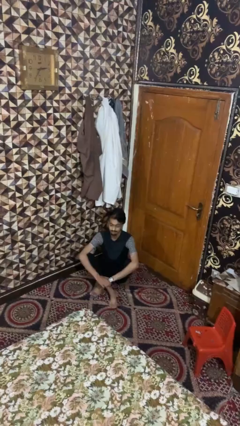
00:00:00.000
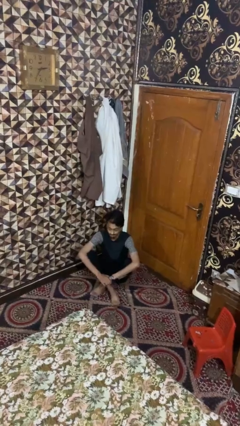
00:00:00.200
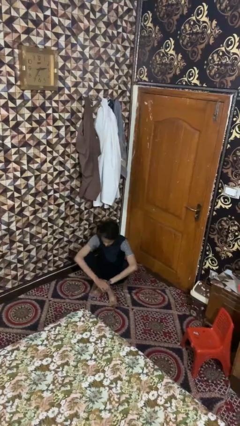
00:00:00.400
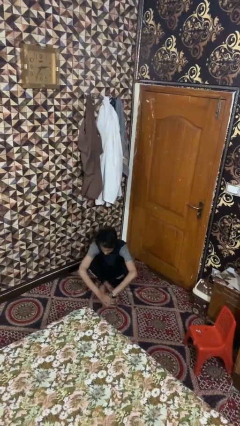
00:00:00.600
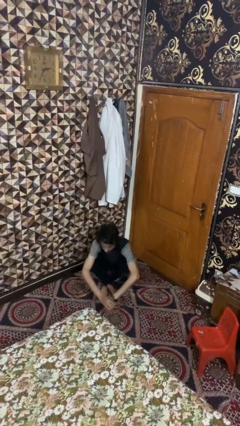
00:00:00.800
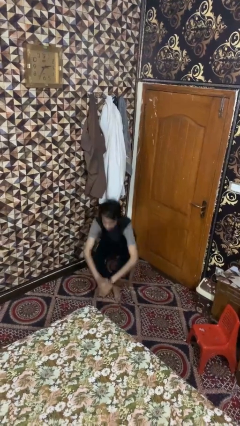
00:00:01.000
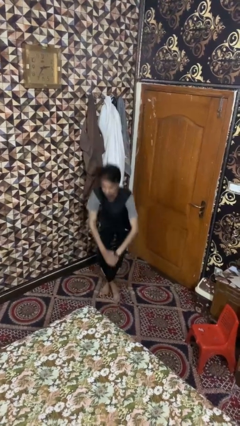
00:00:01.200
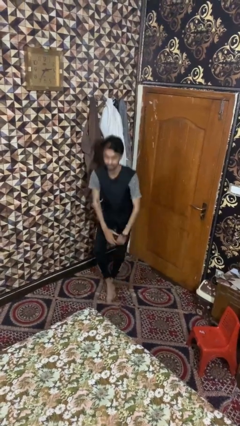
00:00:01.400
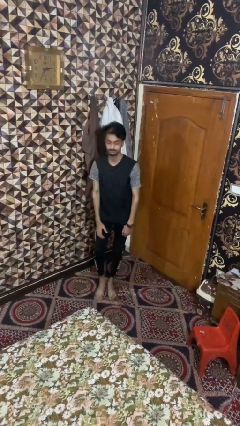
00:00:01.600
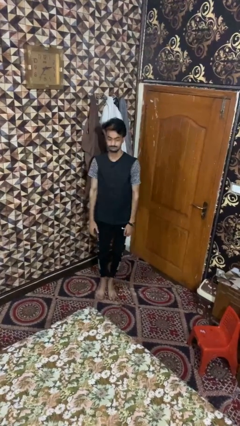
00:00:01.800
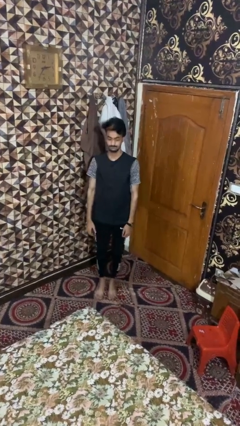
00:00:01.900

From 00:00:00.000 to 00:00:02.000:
person stands up from floor

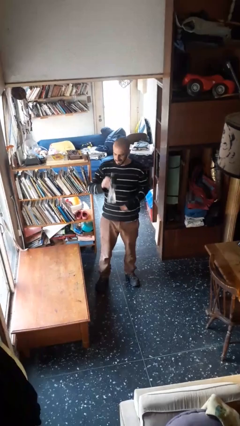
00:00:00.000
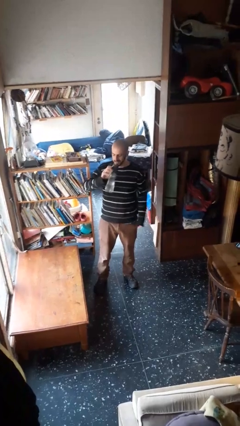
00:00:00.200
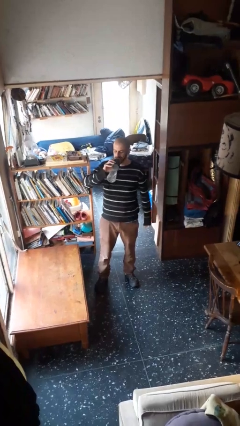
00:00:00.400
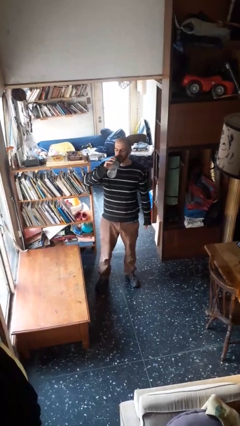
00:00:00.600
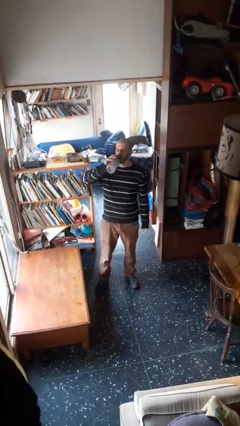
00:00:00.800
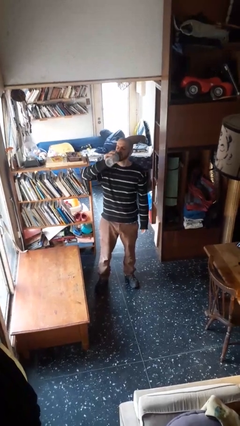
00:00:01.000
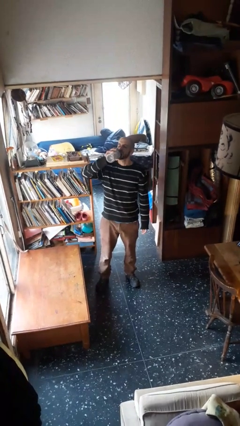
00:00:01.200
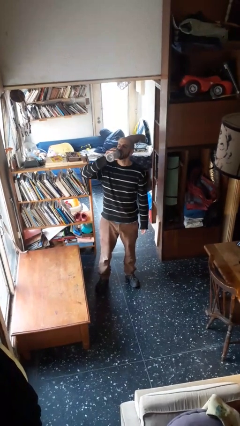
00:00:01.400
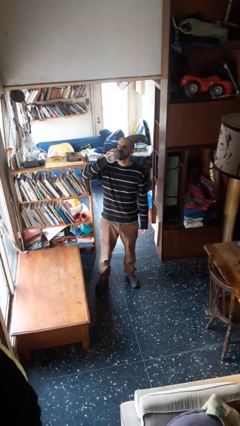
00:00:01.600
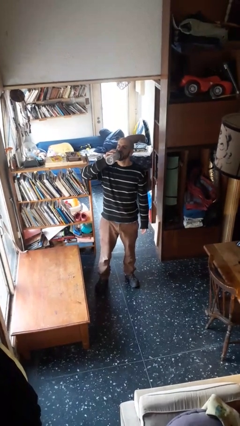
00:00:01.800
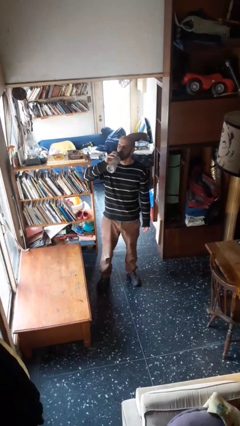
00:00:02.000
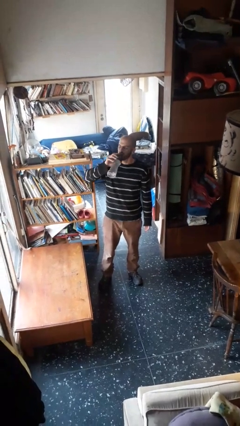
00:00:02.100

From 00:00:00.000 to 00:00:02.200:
person drinks from bottle

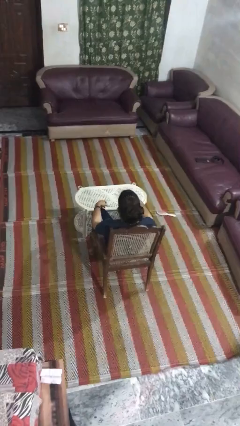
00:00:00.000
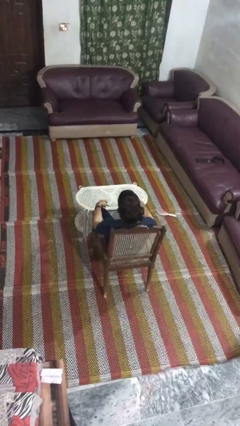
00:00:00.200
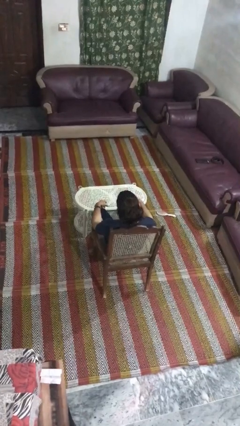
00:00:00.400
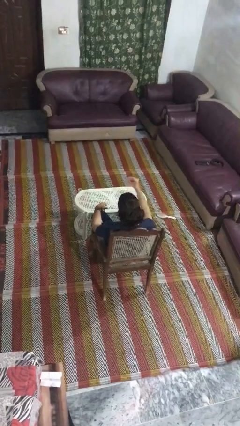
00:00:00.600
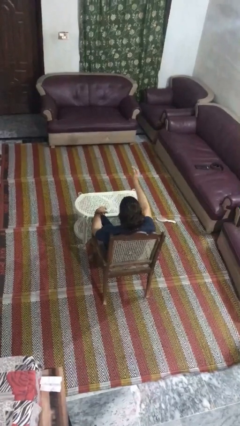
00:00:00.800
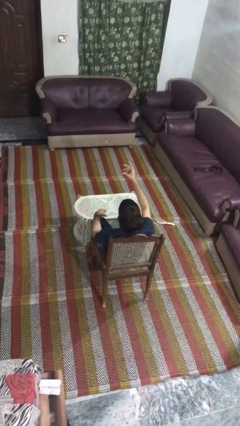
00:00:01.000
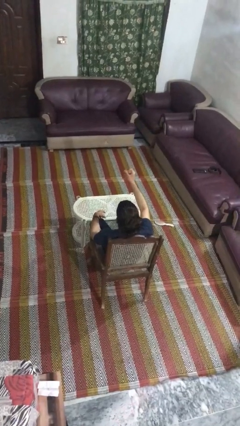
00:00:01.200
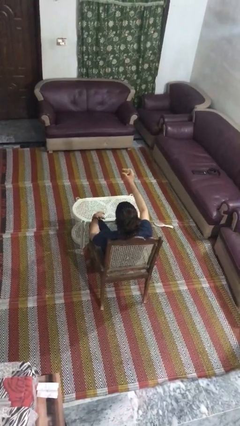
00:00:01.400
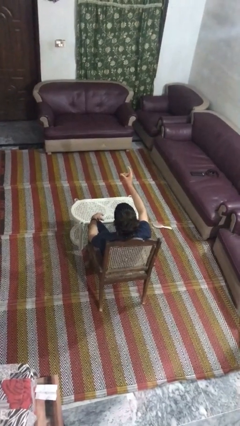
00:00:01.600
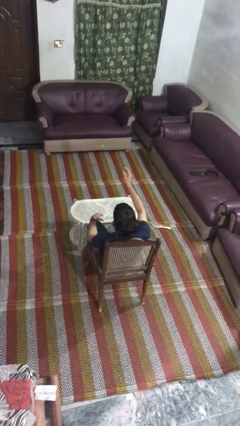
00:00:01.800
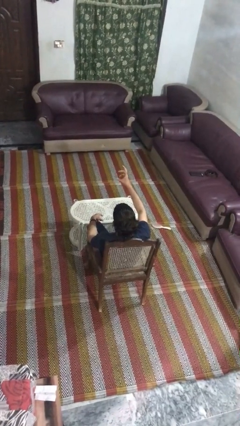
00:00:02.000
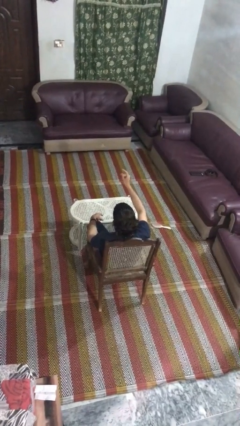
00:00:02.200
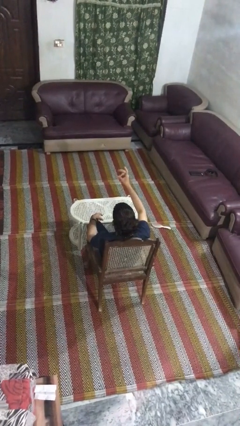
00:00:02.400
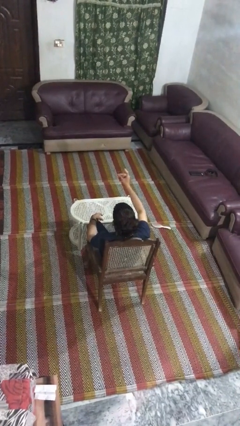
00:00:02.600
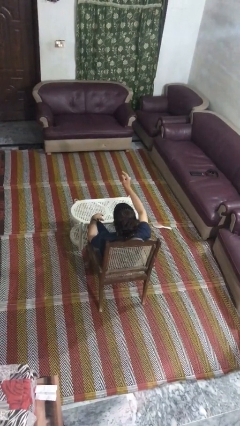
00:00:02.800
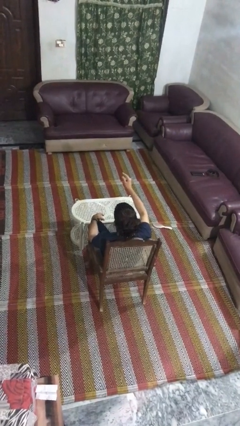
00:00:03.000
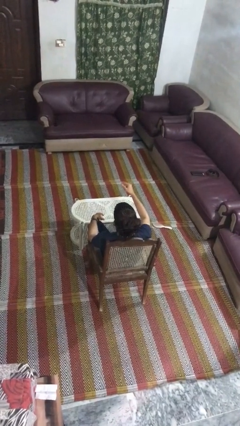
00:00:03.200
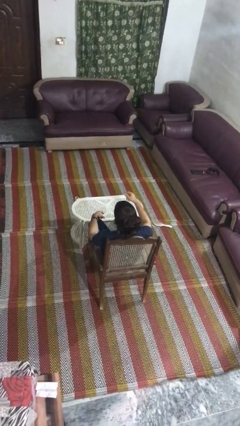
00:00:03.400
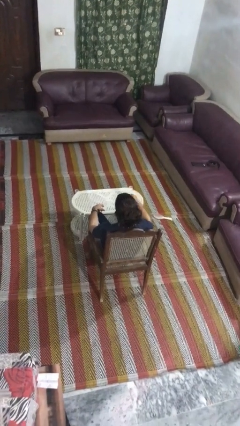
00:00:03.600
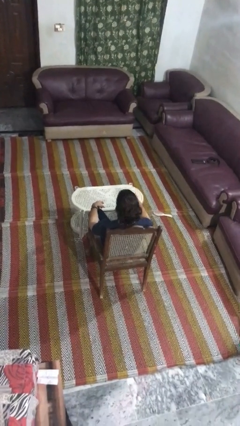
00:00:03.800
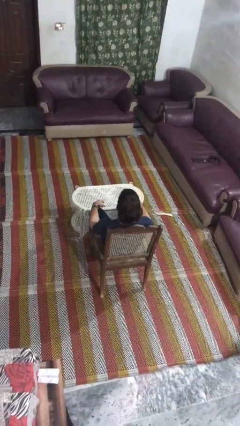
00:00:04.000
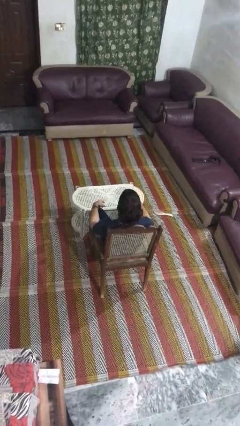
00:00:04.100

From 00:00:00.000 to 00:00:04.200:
person snaps fingers

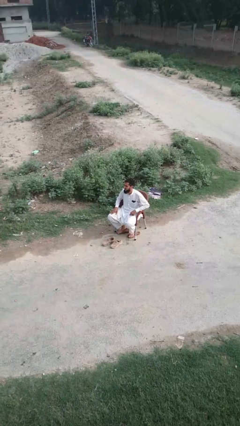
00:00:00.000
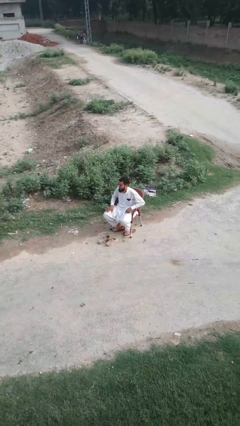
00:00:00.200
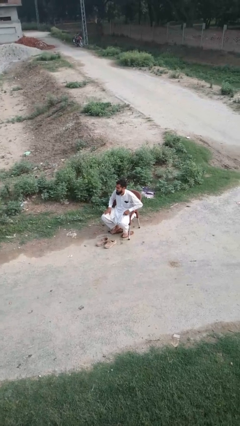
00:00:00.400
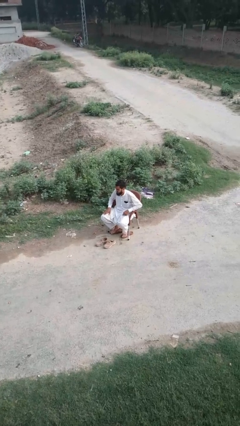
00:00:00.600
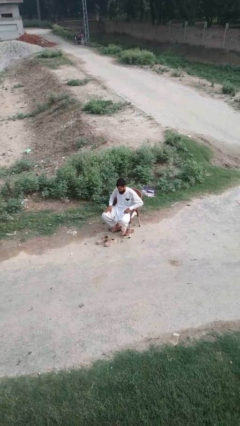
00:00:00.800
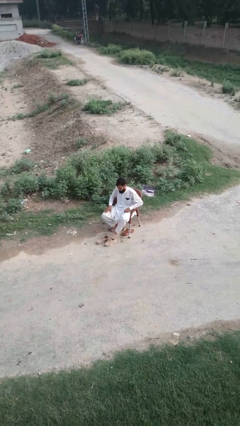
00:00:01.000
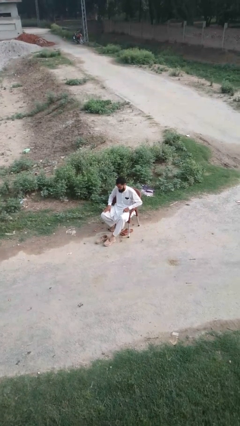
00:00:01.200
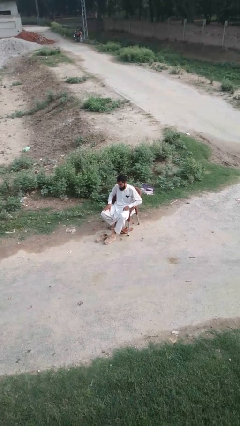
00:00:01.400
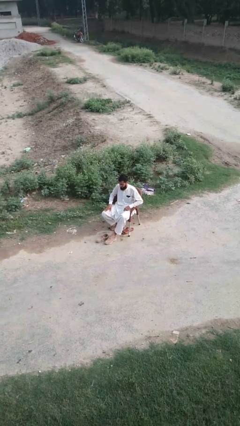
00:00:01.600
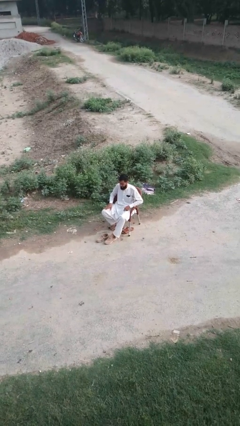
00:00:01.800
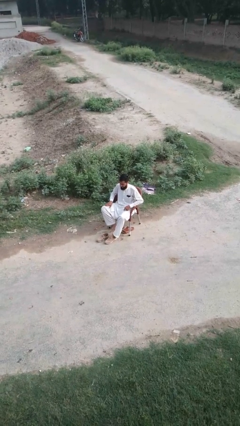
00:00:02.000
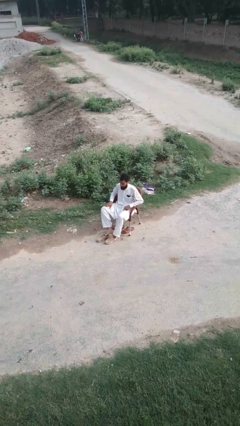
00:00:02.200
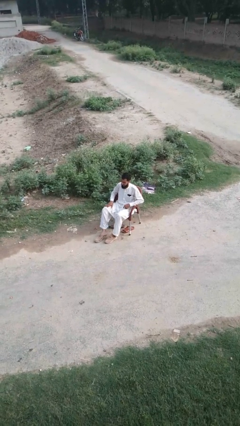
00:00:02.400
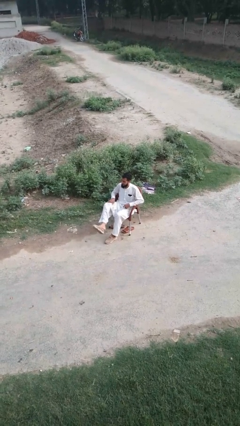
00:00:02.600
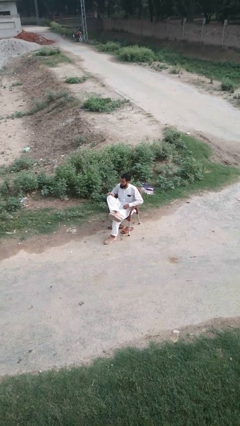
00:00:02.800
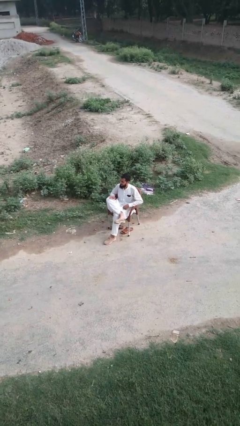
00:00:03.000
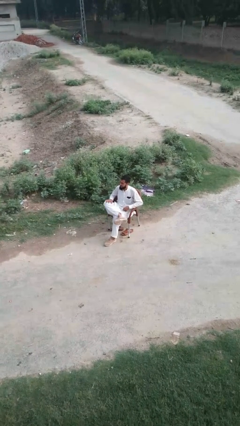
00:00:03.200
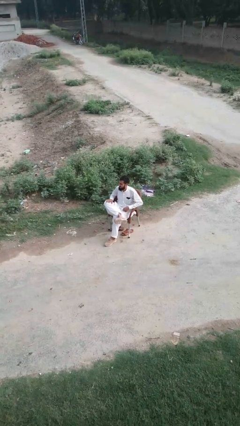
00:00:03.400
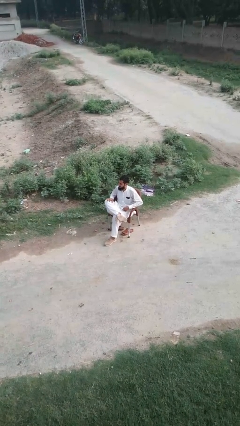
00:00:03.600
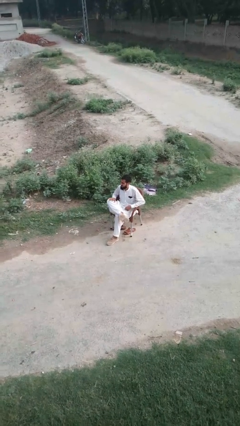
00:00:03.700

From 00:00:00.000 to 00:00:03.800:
person puts on shoes

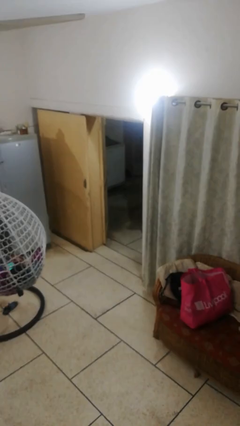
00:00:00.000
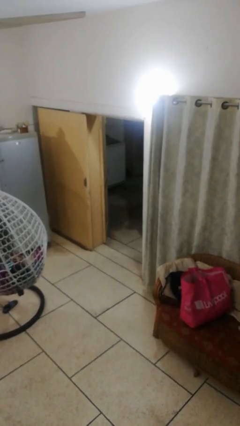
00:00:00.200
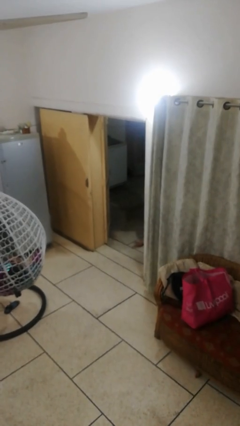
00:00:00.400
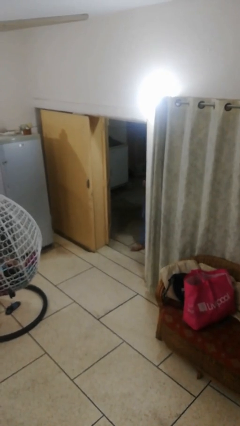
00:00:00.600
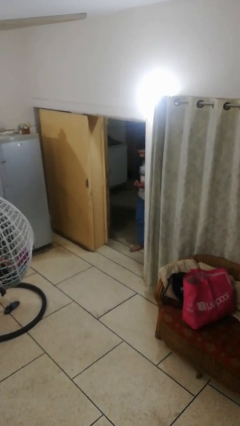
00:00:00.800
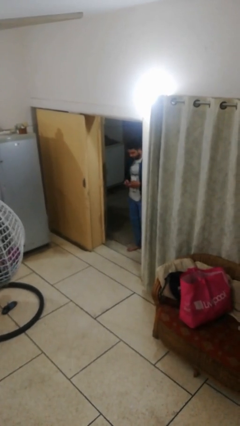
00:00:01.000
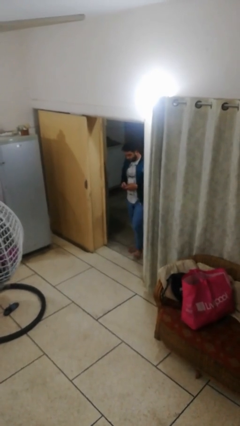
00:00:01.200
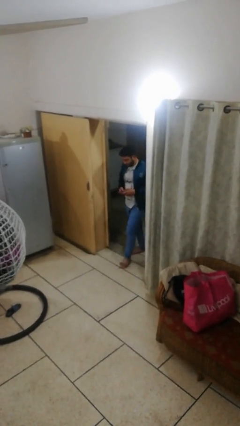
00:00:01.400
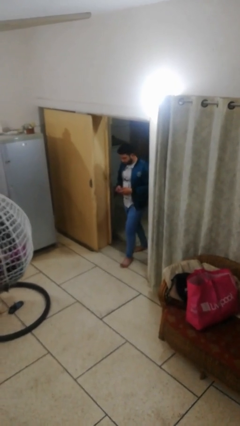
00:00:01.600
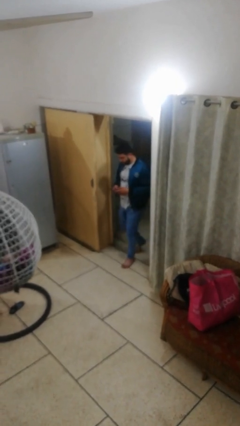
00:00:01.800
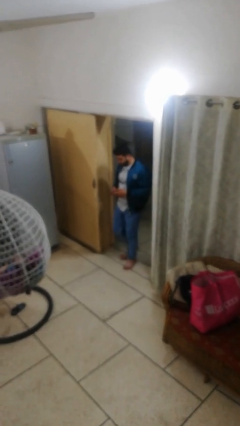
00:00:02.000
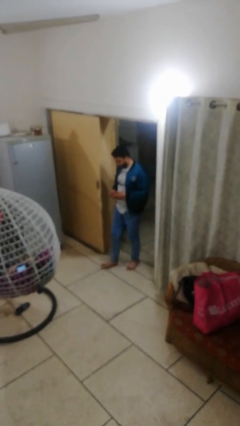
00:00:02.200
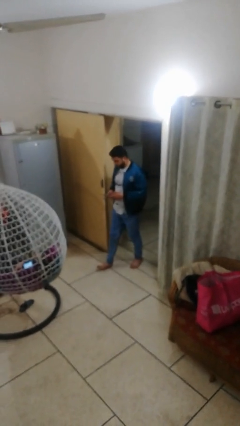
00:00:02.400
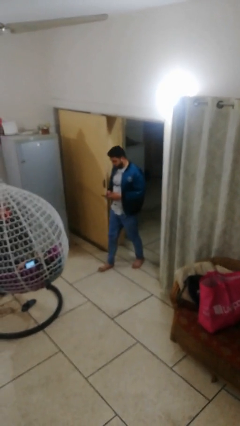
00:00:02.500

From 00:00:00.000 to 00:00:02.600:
person enters scene through structure

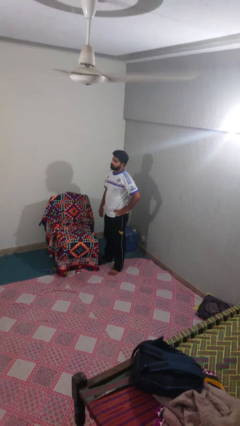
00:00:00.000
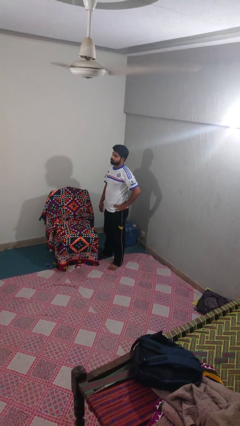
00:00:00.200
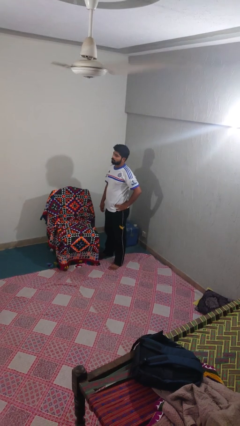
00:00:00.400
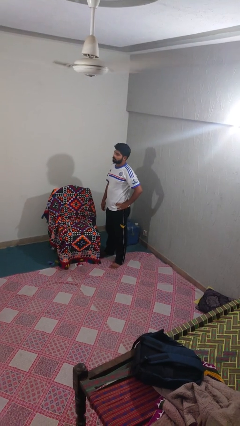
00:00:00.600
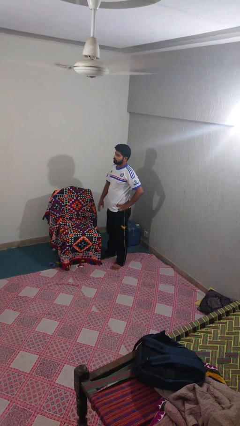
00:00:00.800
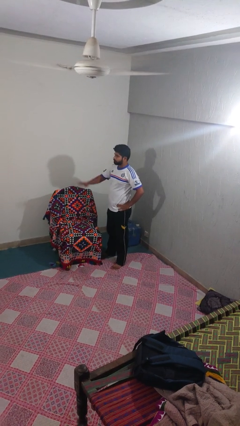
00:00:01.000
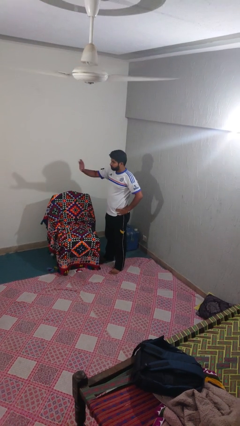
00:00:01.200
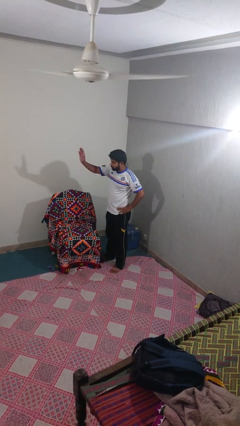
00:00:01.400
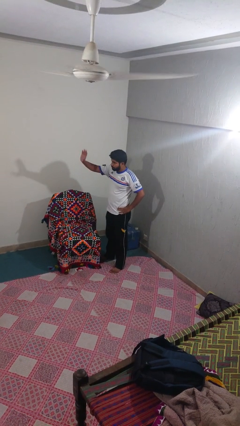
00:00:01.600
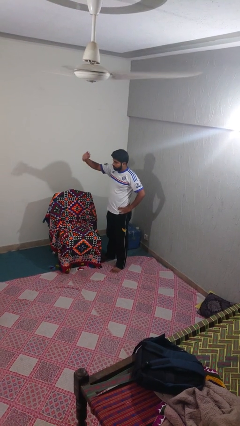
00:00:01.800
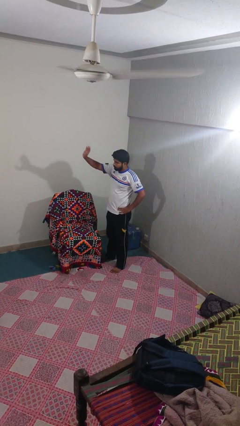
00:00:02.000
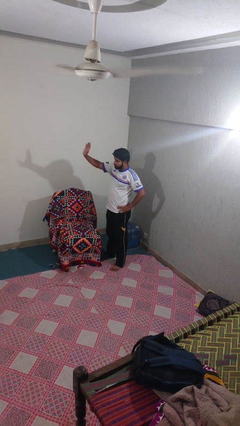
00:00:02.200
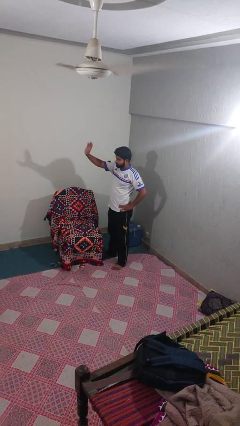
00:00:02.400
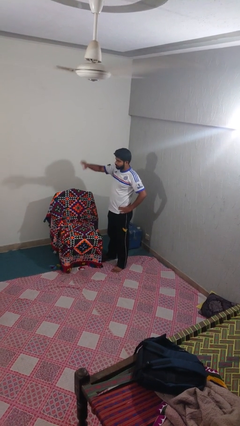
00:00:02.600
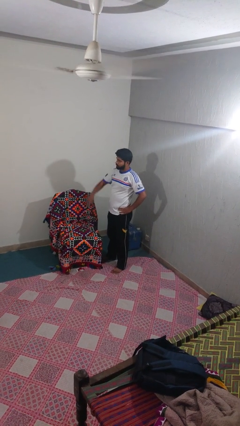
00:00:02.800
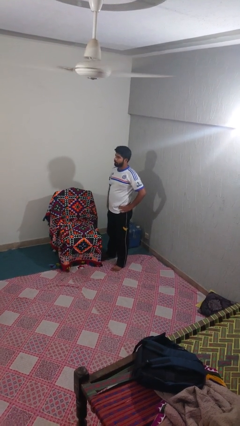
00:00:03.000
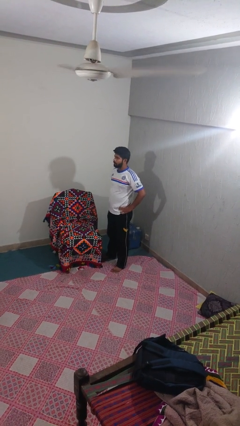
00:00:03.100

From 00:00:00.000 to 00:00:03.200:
person waves at person
